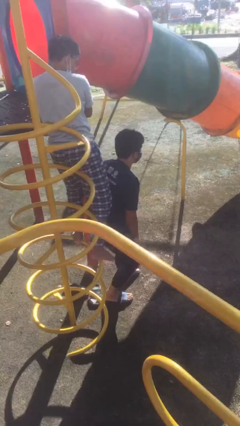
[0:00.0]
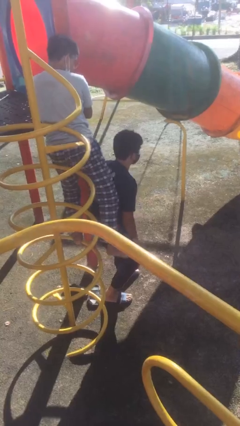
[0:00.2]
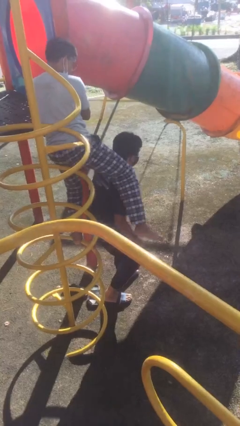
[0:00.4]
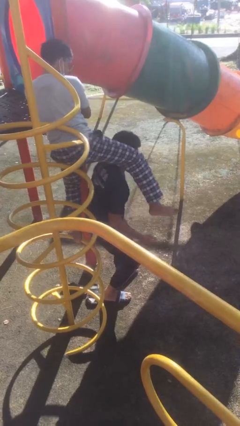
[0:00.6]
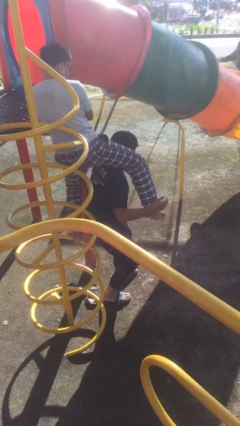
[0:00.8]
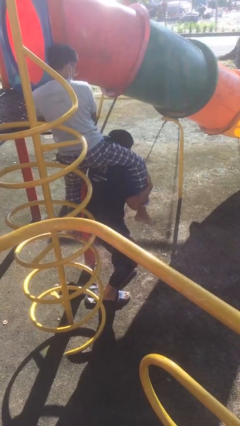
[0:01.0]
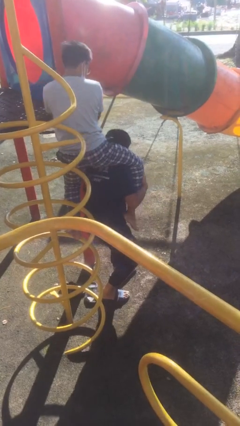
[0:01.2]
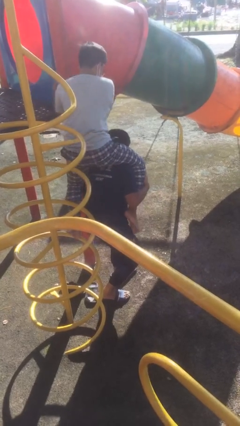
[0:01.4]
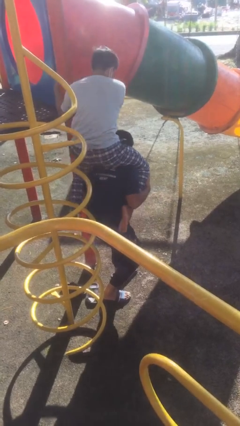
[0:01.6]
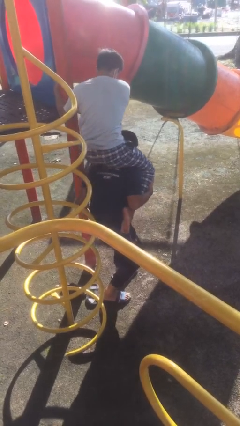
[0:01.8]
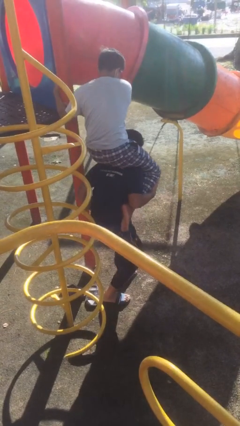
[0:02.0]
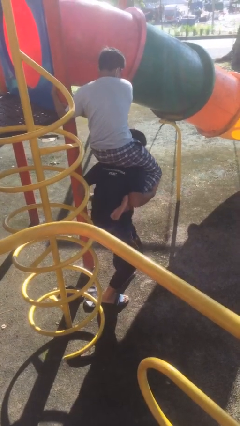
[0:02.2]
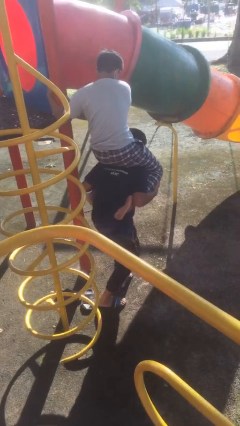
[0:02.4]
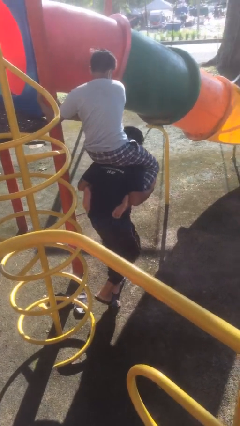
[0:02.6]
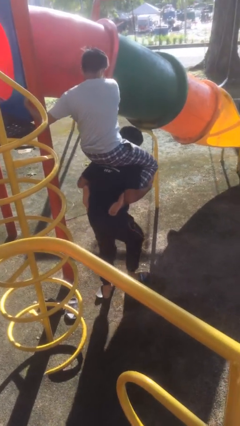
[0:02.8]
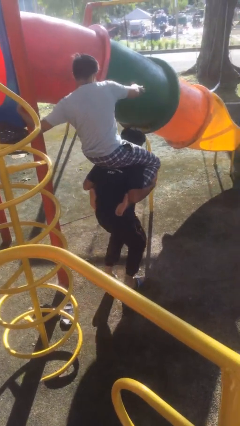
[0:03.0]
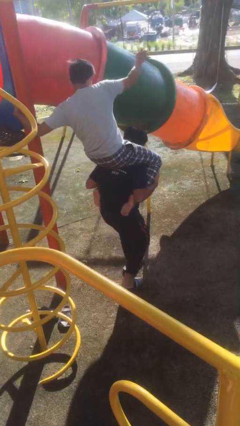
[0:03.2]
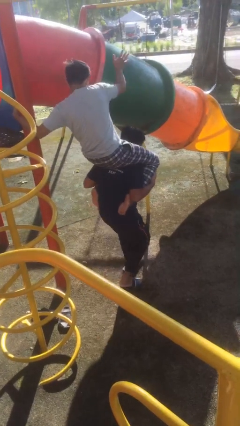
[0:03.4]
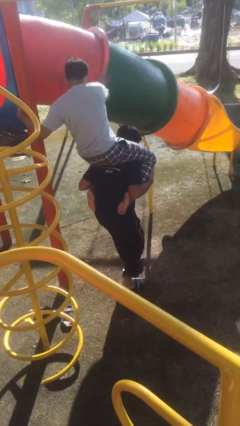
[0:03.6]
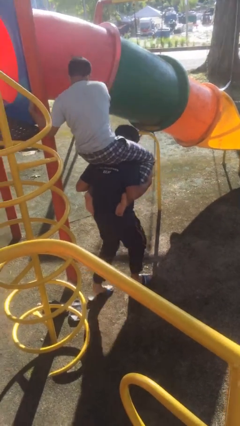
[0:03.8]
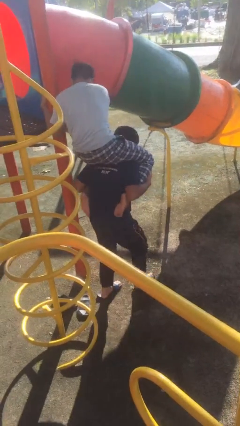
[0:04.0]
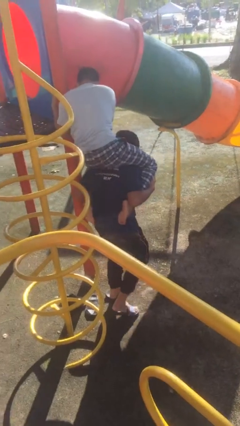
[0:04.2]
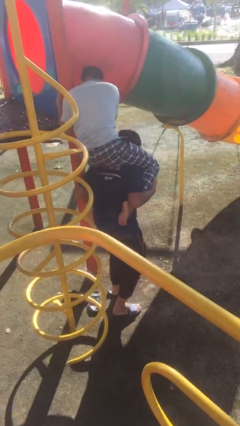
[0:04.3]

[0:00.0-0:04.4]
person carries person on shoulders

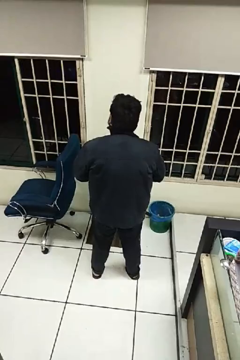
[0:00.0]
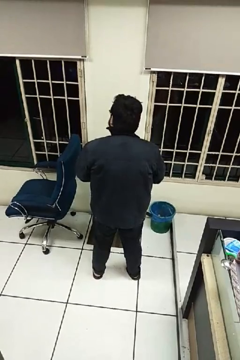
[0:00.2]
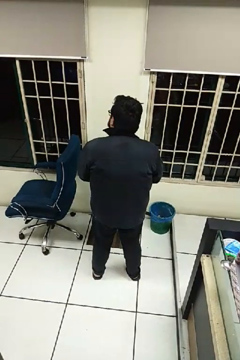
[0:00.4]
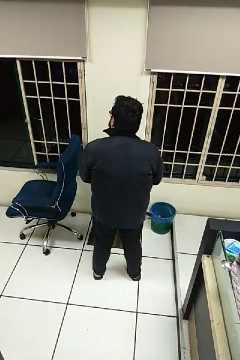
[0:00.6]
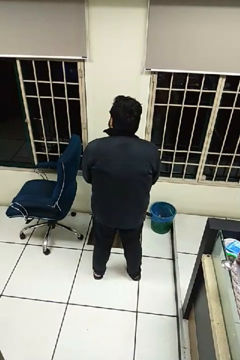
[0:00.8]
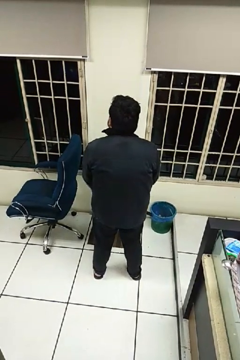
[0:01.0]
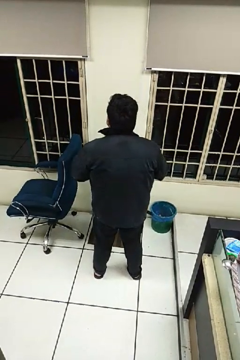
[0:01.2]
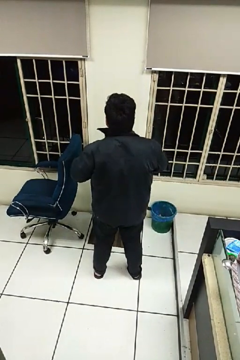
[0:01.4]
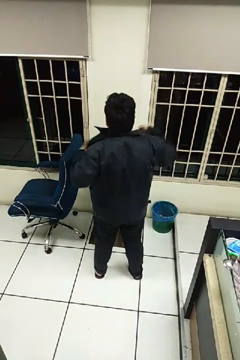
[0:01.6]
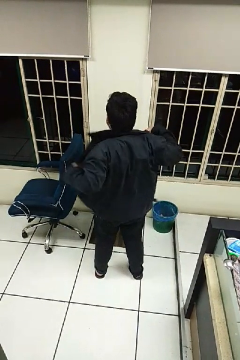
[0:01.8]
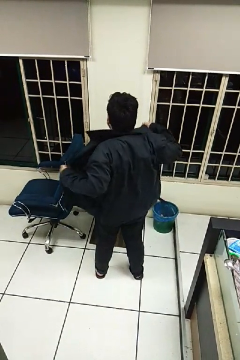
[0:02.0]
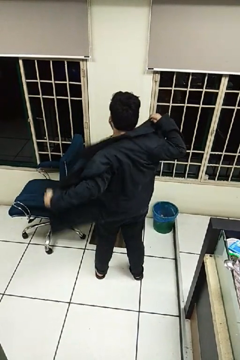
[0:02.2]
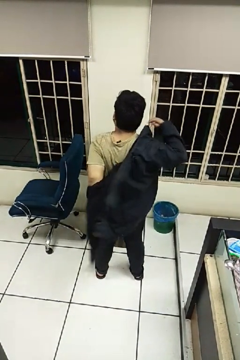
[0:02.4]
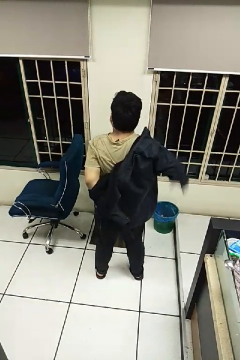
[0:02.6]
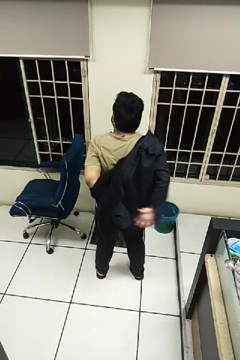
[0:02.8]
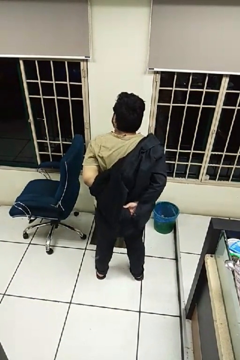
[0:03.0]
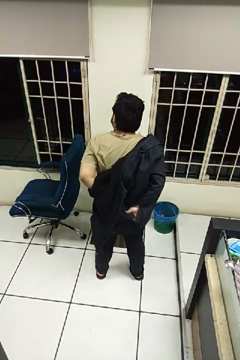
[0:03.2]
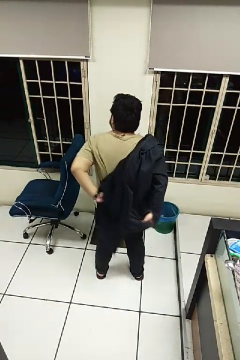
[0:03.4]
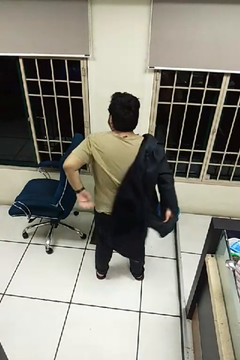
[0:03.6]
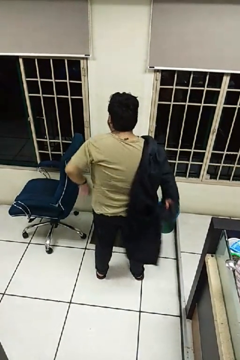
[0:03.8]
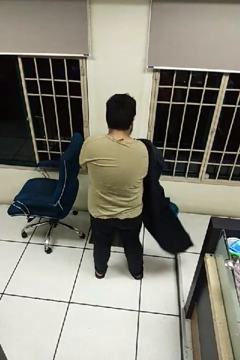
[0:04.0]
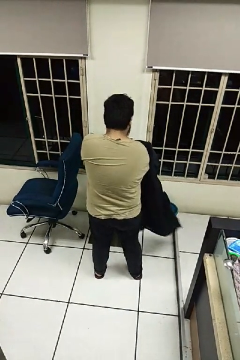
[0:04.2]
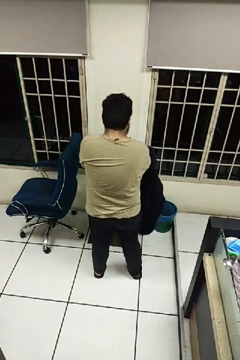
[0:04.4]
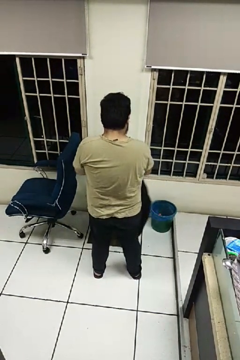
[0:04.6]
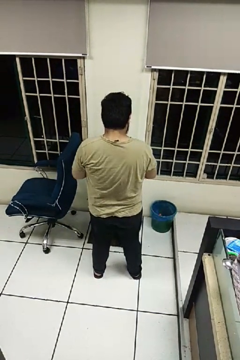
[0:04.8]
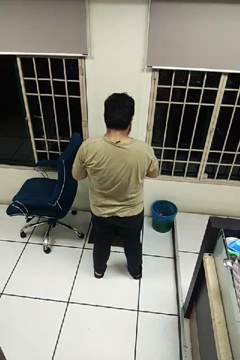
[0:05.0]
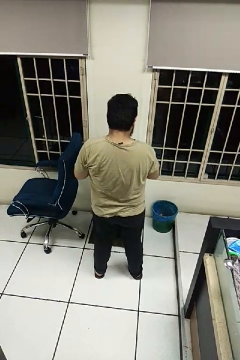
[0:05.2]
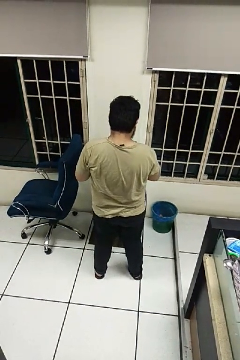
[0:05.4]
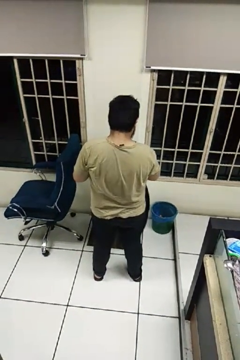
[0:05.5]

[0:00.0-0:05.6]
person takes off shirt

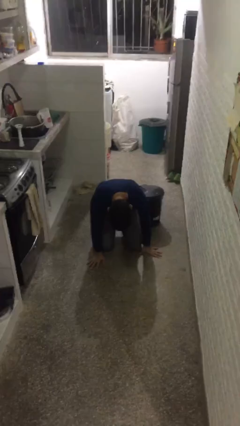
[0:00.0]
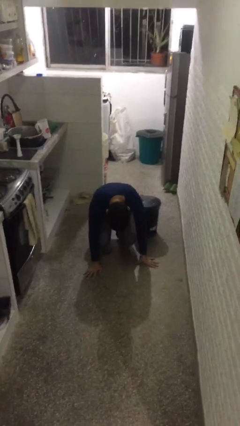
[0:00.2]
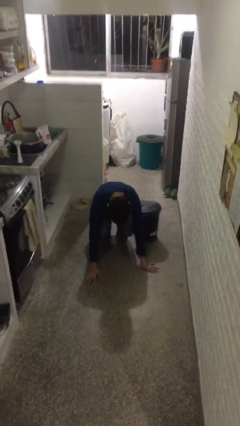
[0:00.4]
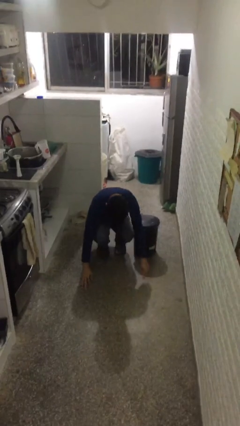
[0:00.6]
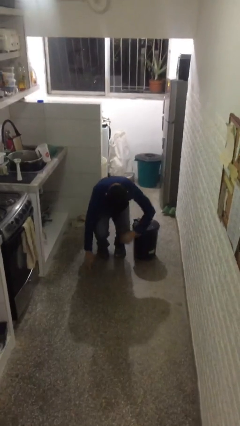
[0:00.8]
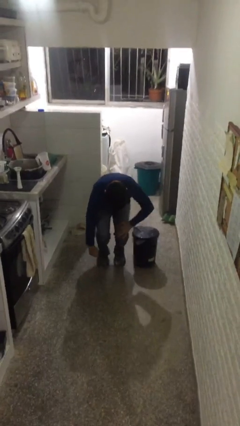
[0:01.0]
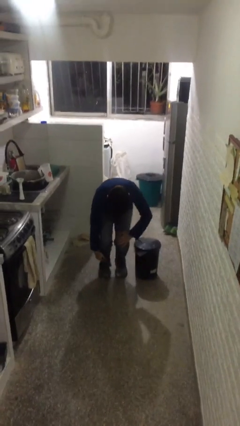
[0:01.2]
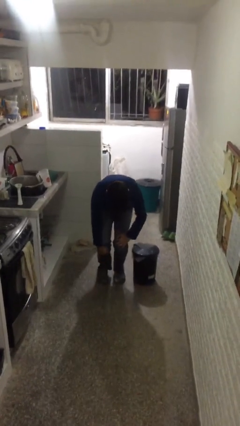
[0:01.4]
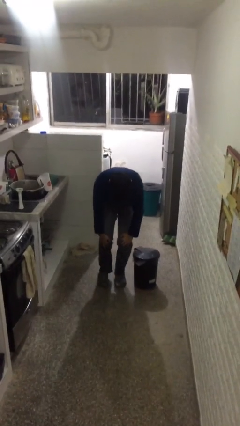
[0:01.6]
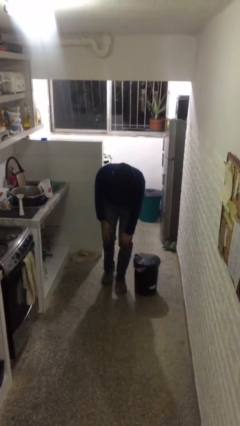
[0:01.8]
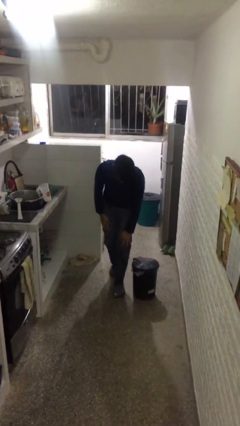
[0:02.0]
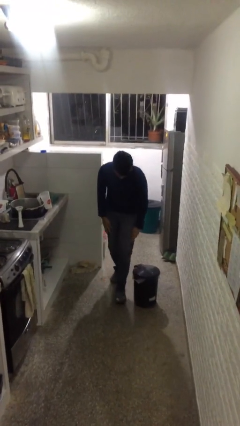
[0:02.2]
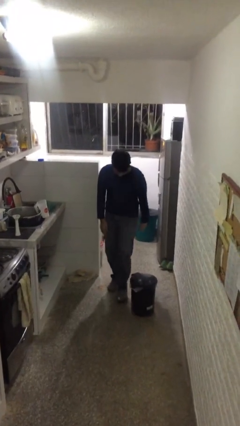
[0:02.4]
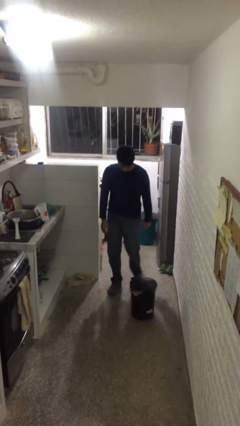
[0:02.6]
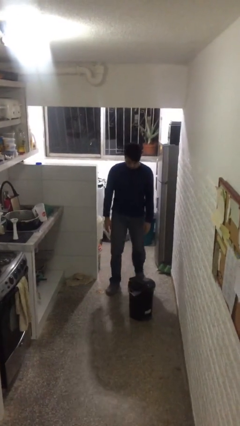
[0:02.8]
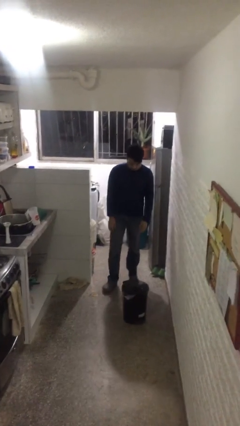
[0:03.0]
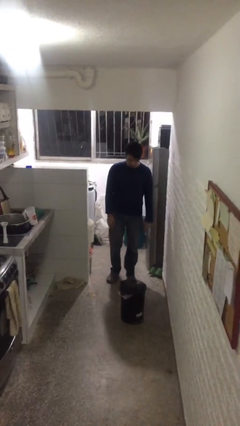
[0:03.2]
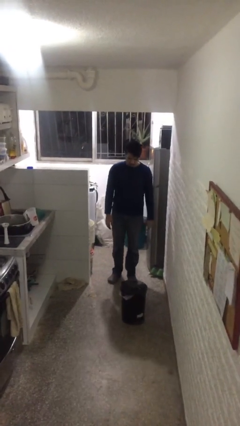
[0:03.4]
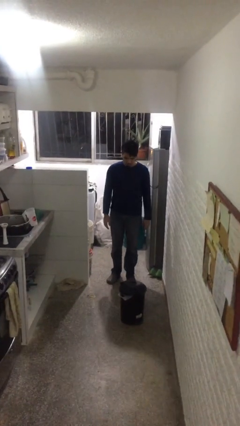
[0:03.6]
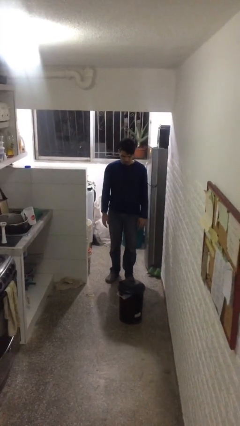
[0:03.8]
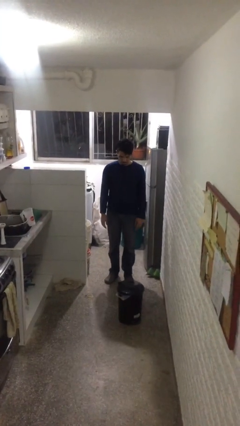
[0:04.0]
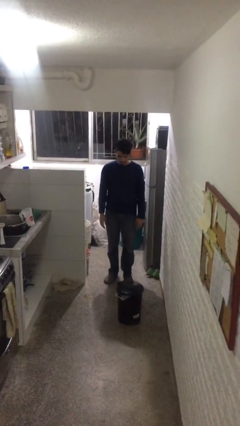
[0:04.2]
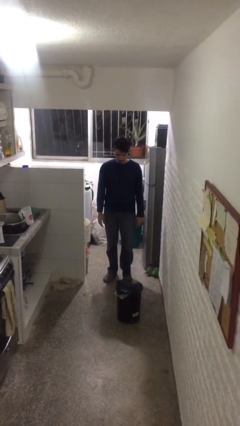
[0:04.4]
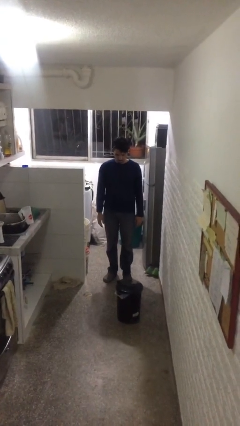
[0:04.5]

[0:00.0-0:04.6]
person stands up from floor

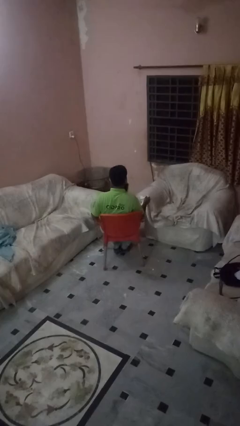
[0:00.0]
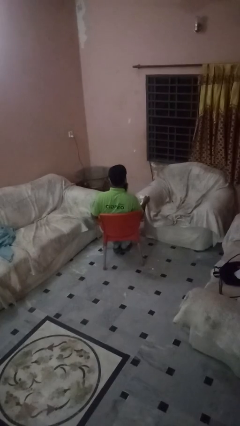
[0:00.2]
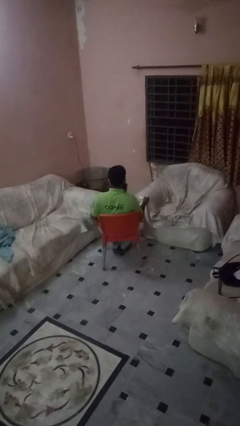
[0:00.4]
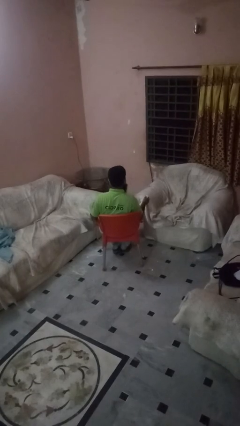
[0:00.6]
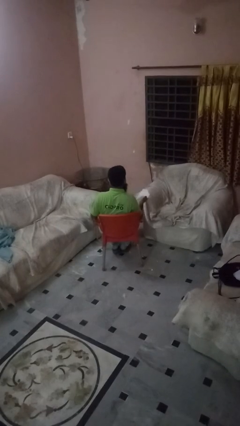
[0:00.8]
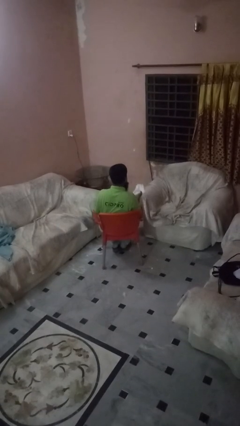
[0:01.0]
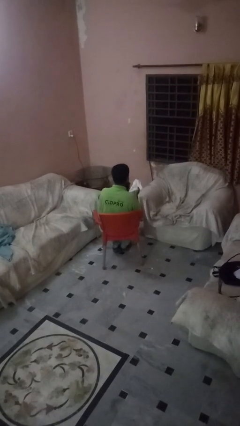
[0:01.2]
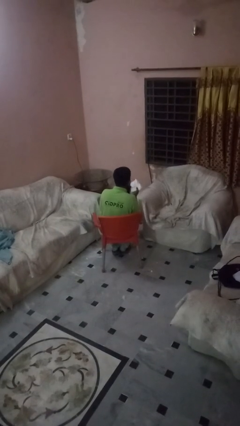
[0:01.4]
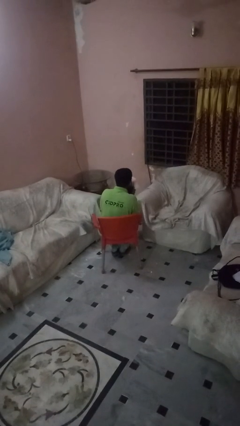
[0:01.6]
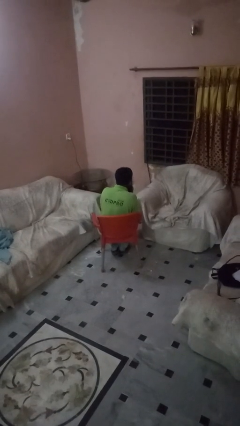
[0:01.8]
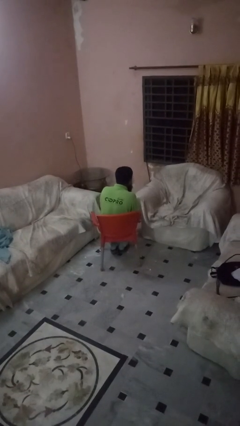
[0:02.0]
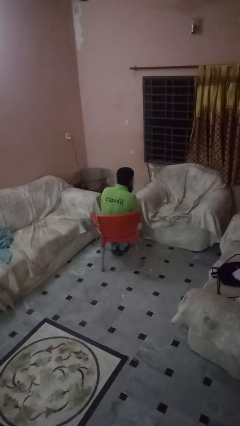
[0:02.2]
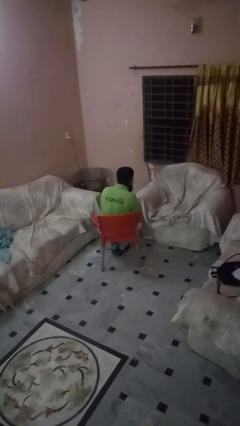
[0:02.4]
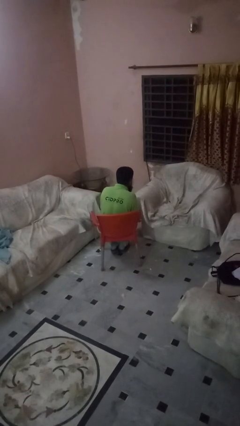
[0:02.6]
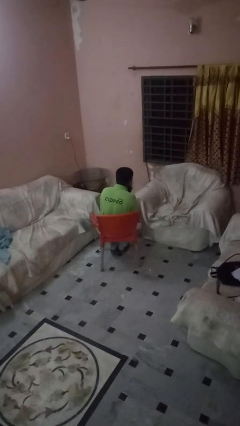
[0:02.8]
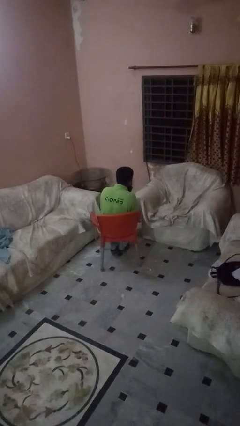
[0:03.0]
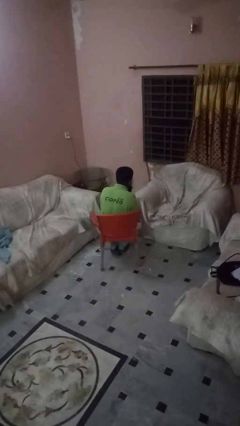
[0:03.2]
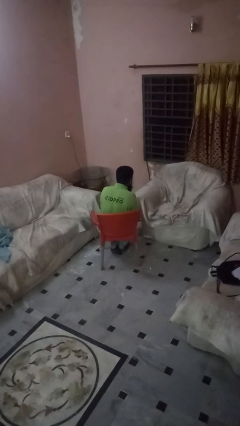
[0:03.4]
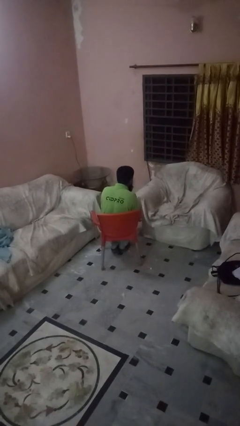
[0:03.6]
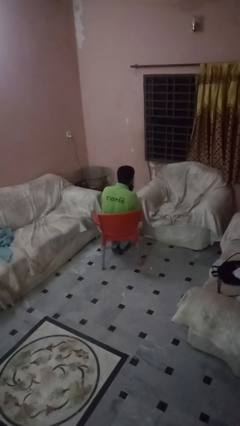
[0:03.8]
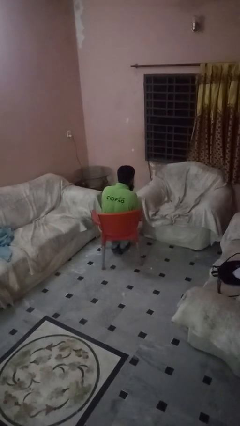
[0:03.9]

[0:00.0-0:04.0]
person blows nose

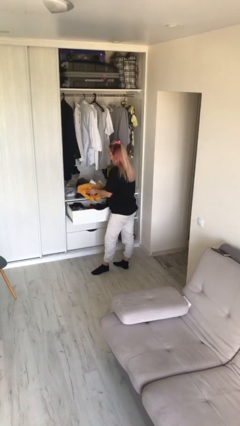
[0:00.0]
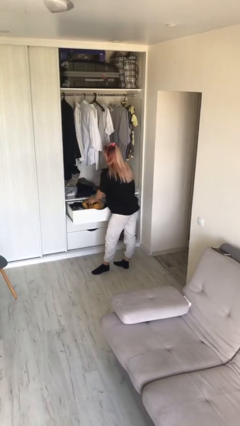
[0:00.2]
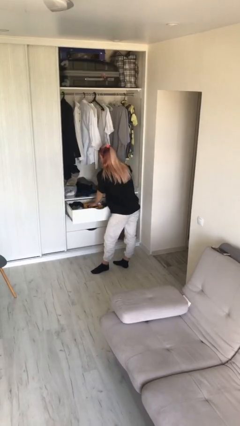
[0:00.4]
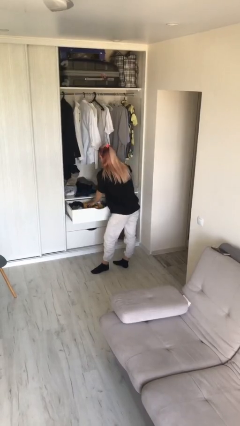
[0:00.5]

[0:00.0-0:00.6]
person puts clothes into dresser
